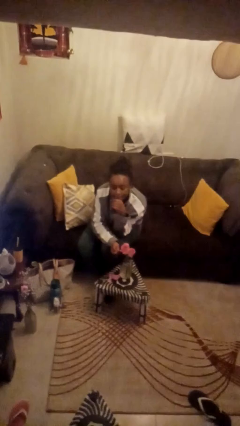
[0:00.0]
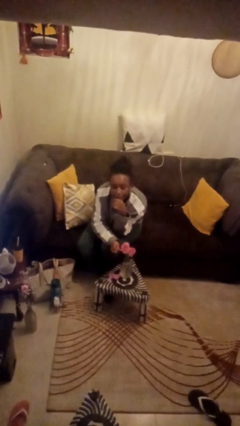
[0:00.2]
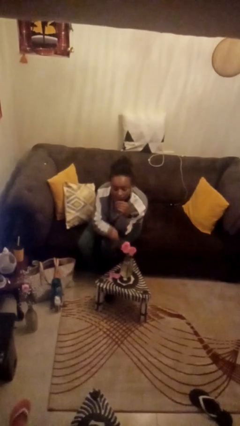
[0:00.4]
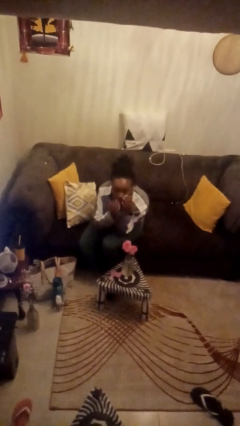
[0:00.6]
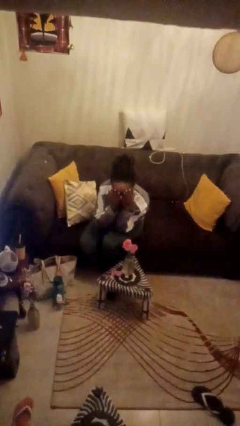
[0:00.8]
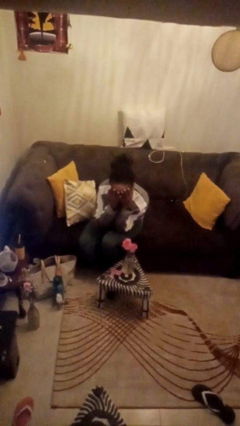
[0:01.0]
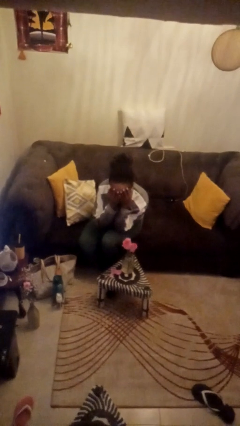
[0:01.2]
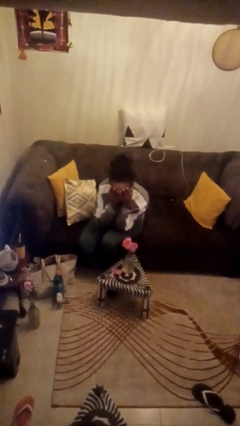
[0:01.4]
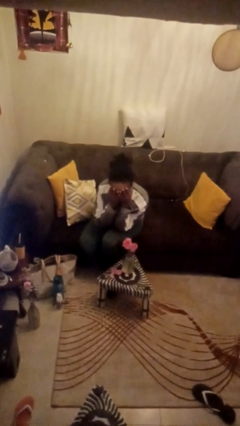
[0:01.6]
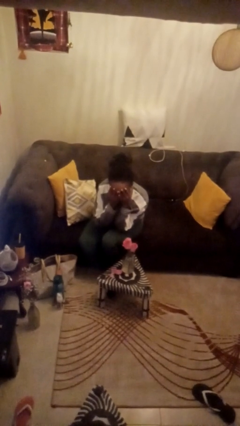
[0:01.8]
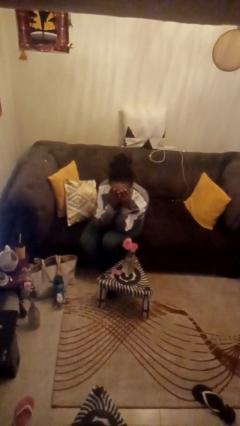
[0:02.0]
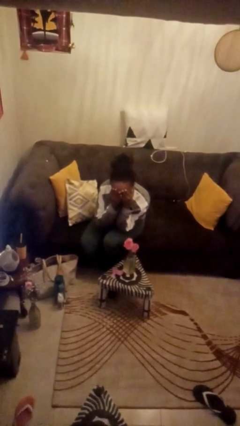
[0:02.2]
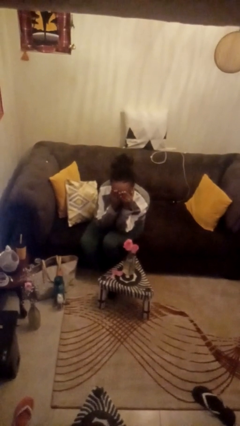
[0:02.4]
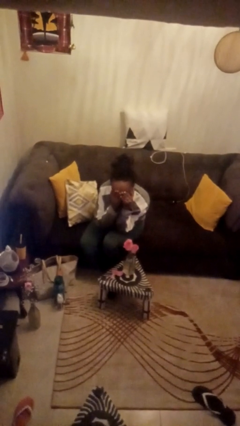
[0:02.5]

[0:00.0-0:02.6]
person covers face with hands

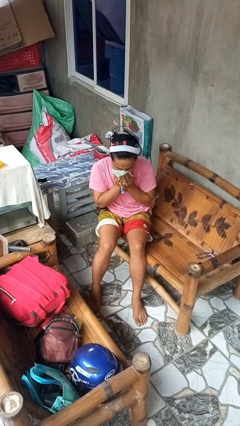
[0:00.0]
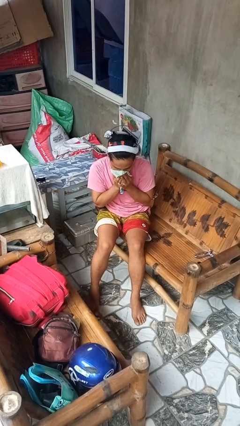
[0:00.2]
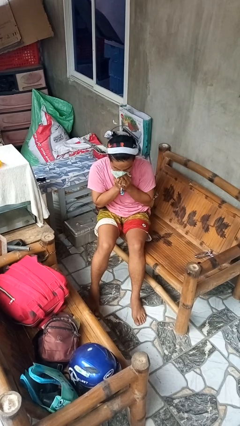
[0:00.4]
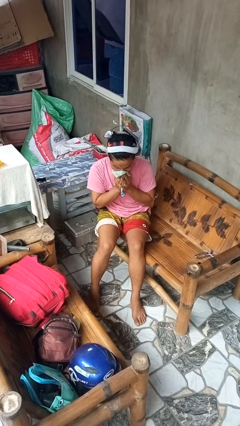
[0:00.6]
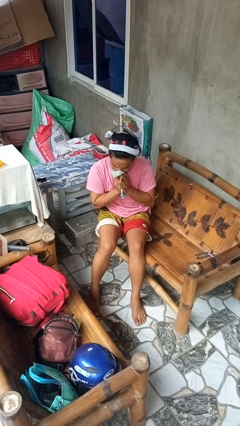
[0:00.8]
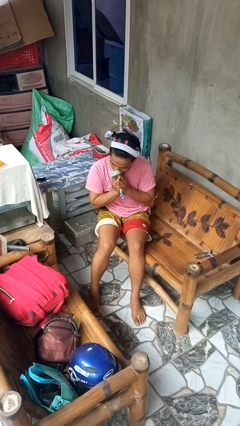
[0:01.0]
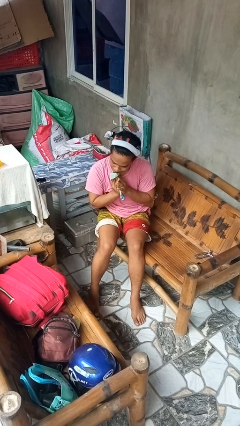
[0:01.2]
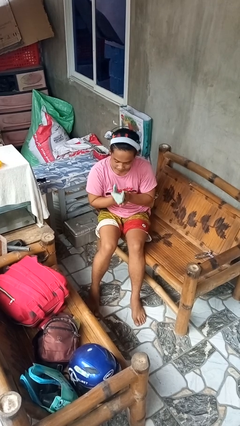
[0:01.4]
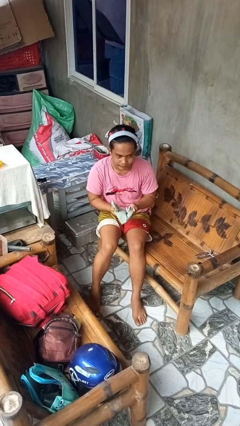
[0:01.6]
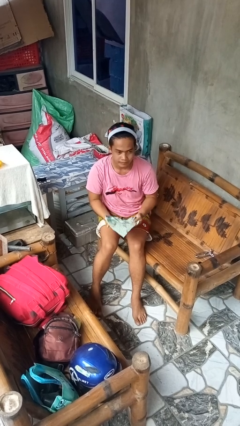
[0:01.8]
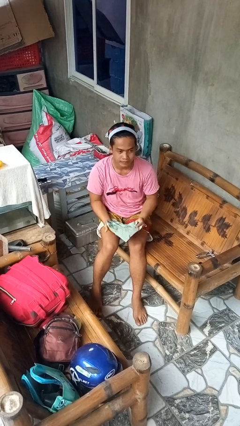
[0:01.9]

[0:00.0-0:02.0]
person blows nose

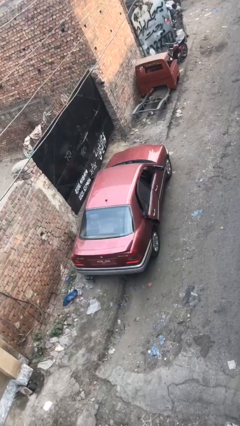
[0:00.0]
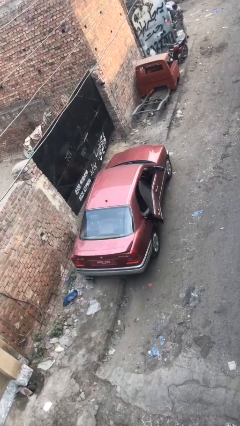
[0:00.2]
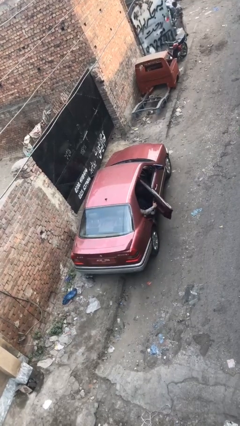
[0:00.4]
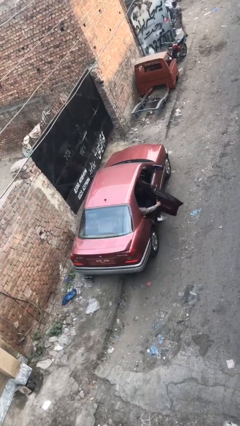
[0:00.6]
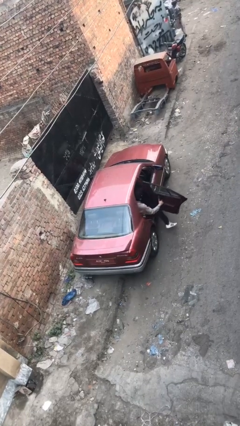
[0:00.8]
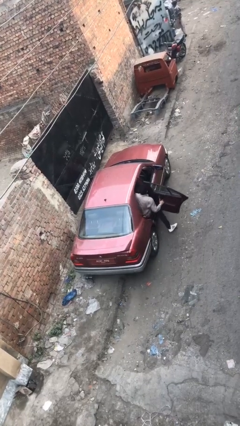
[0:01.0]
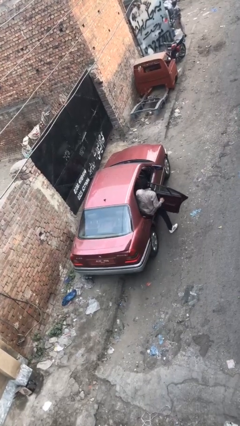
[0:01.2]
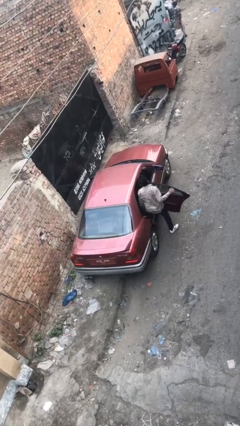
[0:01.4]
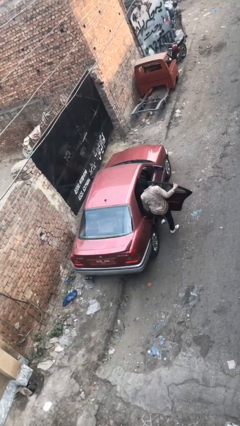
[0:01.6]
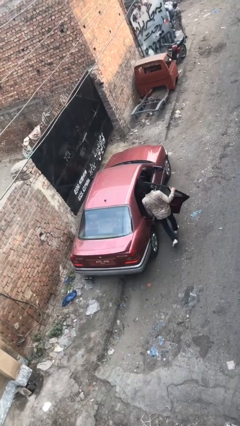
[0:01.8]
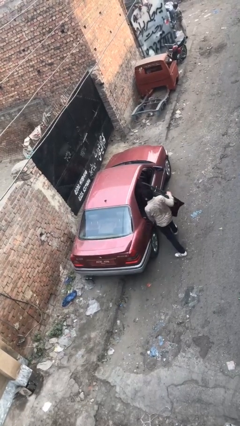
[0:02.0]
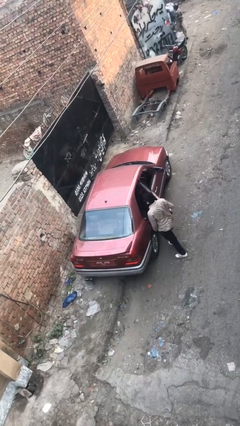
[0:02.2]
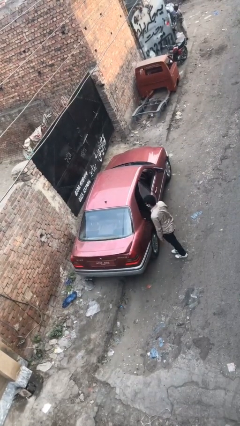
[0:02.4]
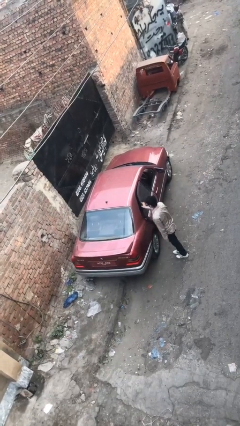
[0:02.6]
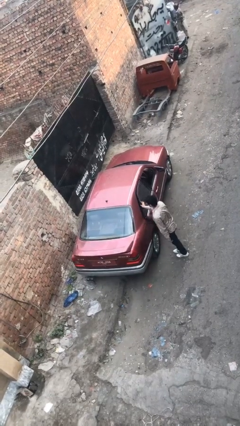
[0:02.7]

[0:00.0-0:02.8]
car drops off person

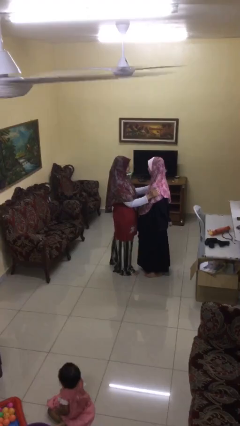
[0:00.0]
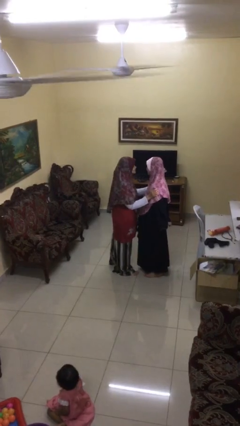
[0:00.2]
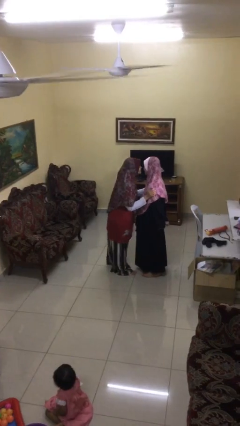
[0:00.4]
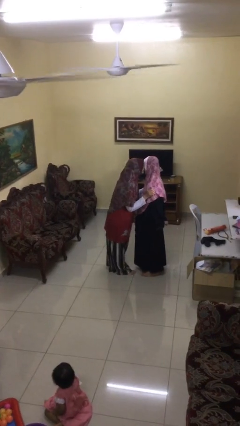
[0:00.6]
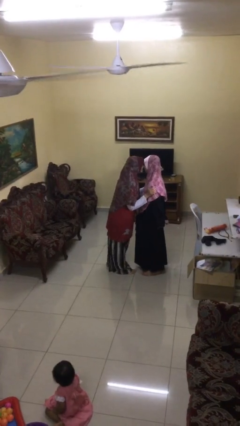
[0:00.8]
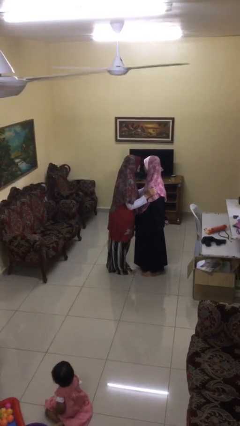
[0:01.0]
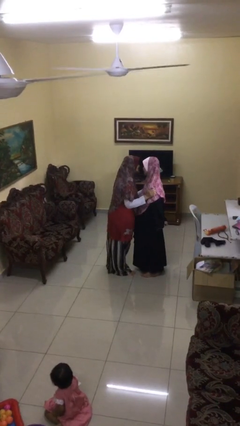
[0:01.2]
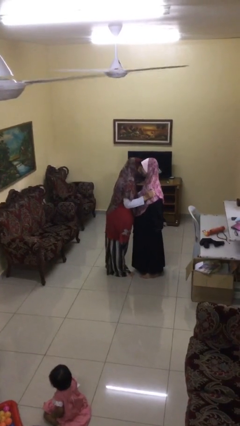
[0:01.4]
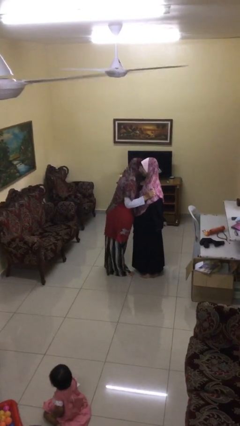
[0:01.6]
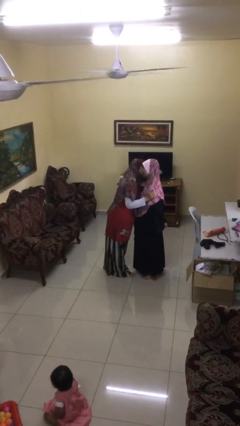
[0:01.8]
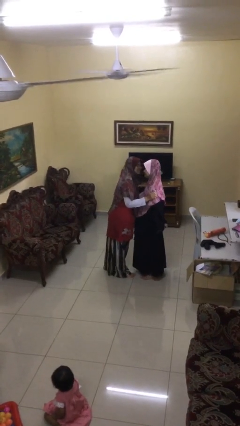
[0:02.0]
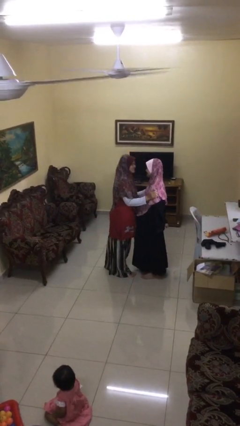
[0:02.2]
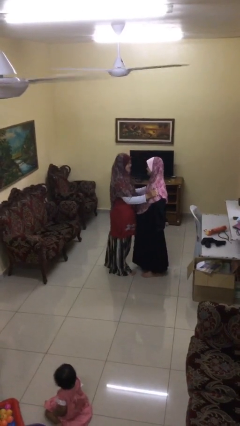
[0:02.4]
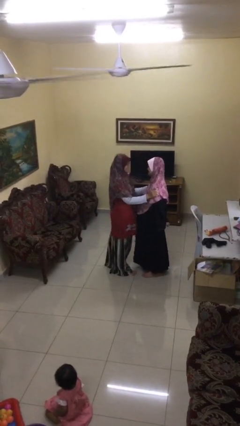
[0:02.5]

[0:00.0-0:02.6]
person kisses cheek of person

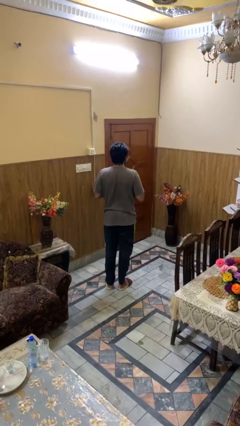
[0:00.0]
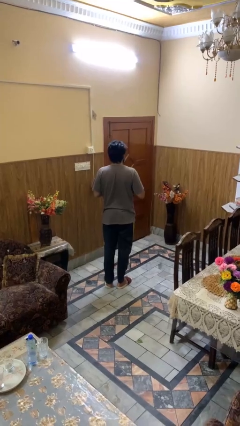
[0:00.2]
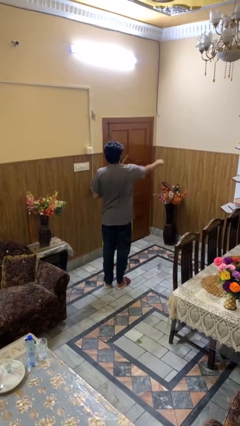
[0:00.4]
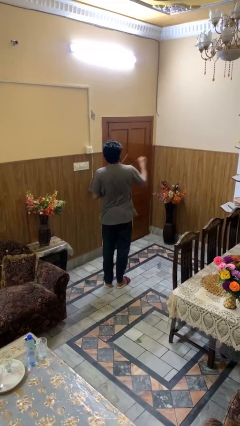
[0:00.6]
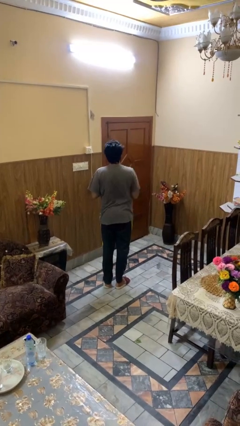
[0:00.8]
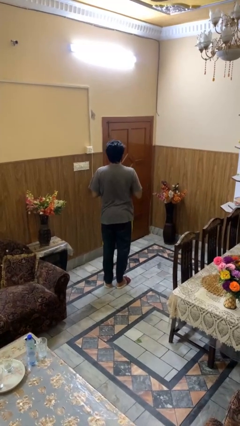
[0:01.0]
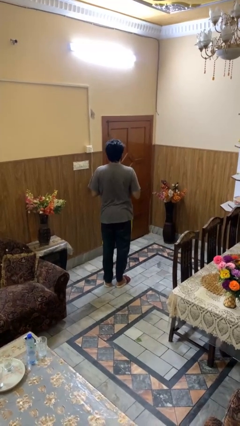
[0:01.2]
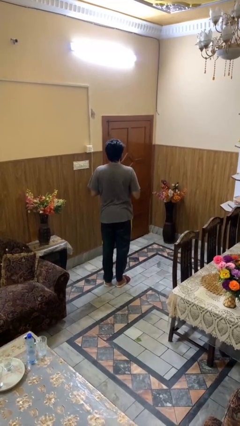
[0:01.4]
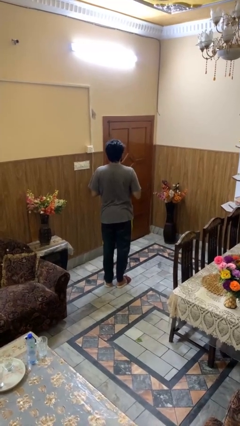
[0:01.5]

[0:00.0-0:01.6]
person karate chop

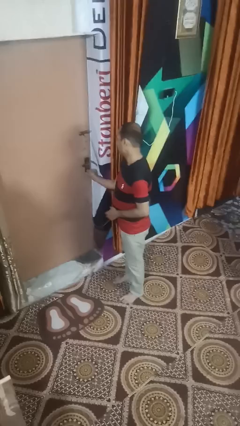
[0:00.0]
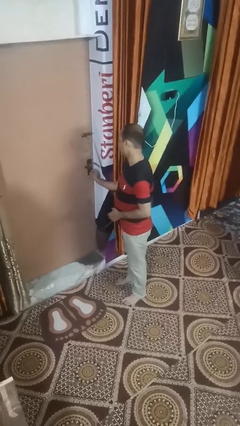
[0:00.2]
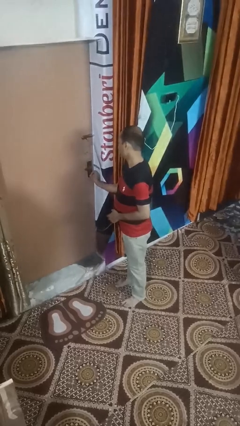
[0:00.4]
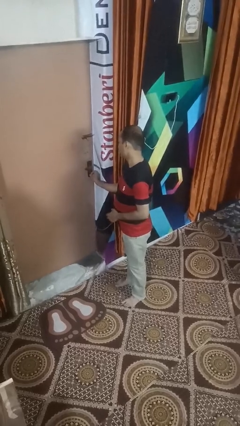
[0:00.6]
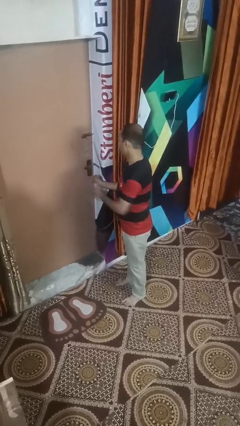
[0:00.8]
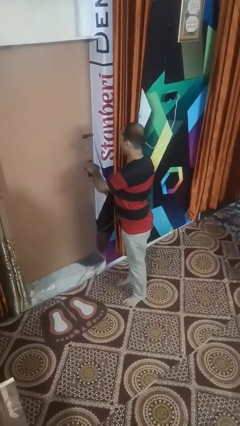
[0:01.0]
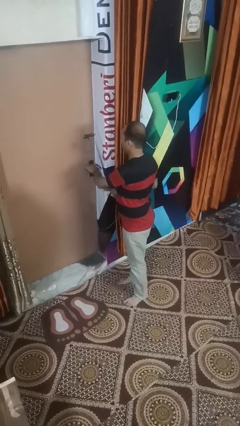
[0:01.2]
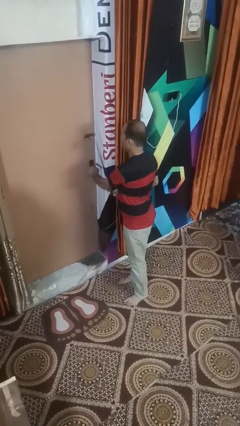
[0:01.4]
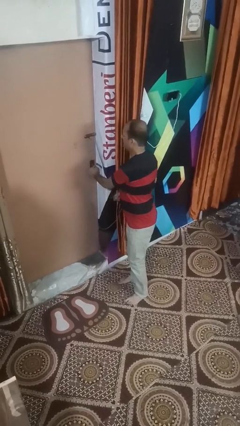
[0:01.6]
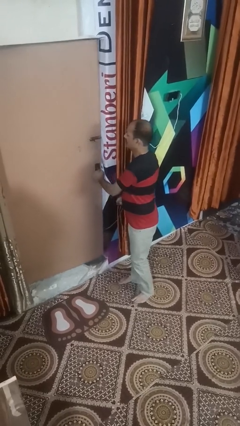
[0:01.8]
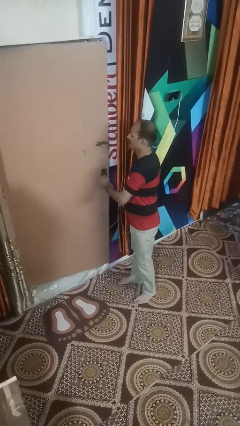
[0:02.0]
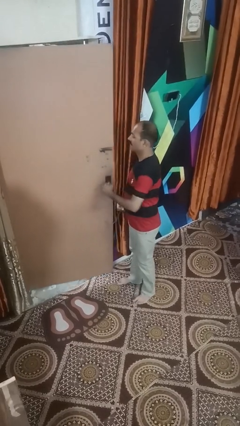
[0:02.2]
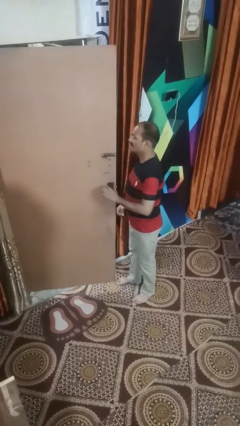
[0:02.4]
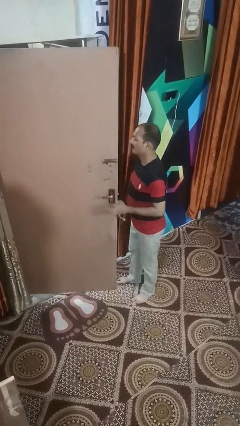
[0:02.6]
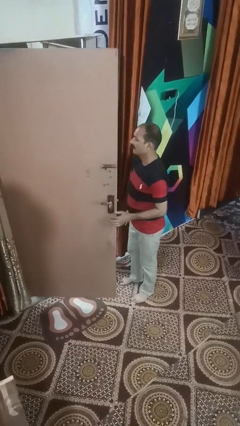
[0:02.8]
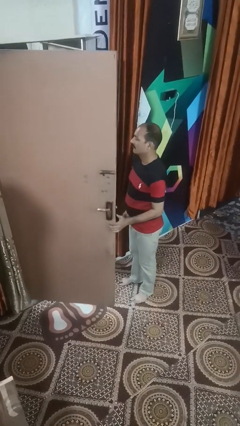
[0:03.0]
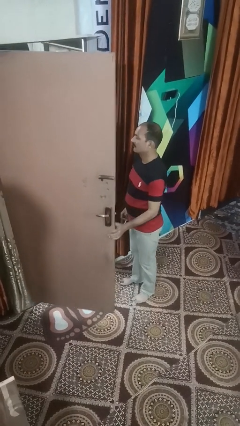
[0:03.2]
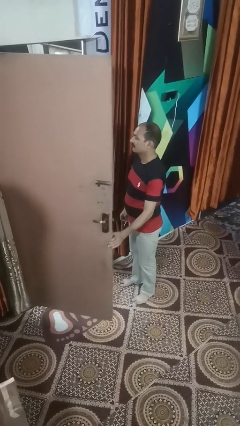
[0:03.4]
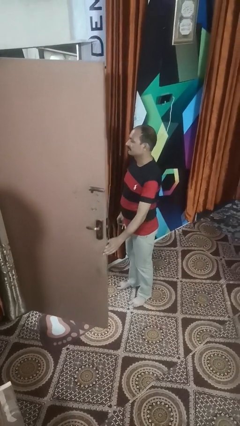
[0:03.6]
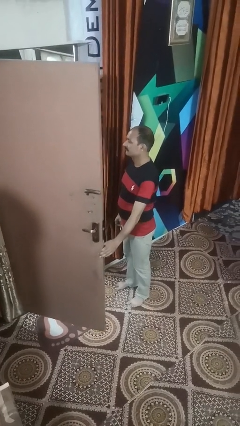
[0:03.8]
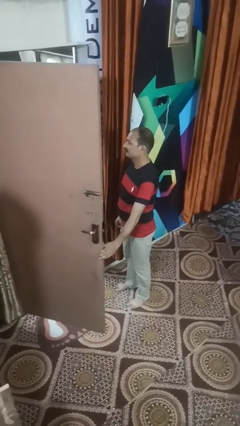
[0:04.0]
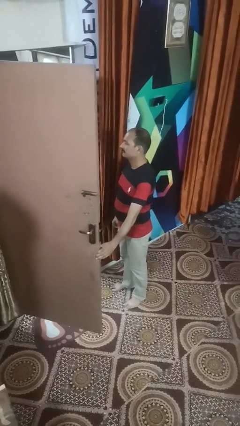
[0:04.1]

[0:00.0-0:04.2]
person opens facility door

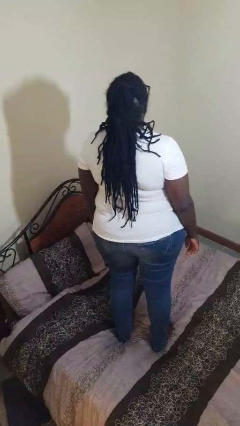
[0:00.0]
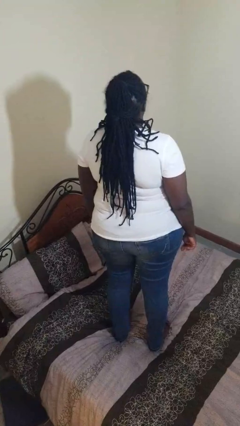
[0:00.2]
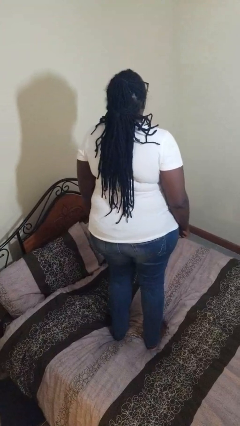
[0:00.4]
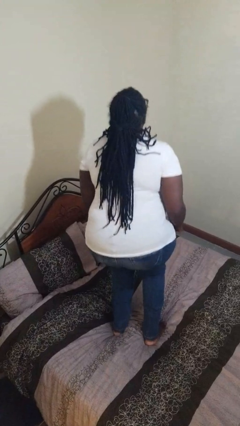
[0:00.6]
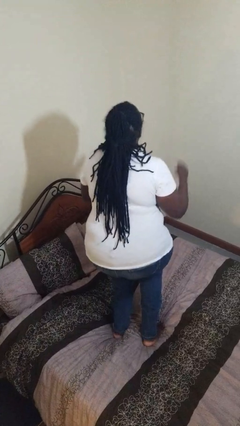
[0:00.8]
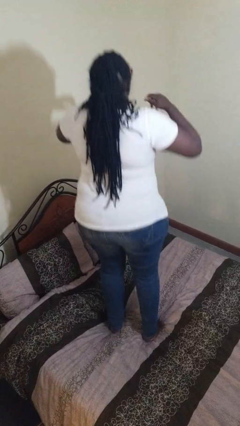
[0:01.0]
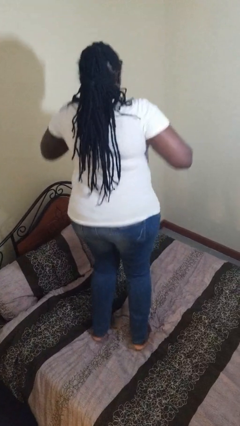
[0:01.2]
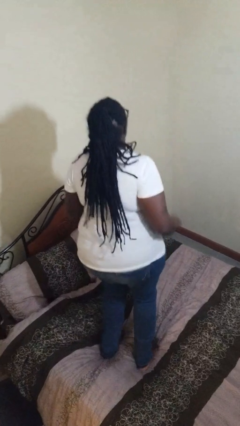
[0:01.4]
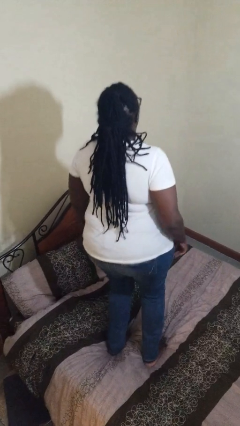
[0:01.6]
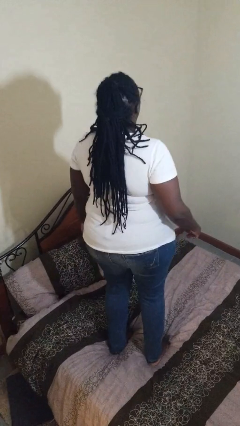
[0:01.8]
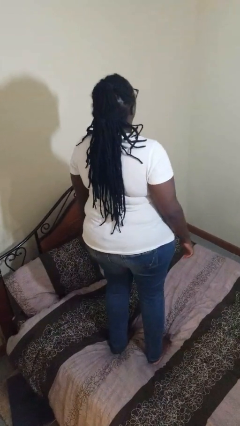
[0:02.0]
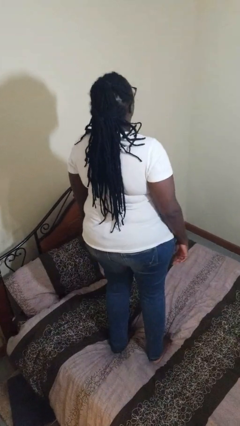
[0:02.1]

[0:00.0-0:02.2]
person jumps on bed
